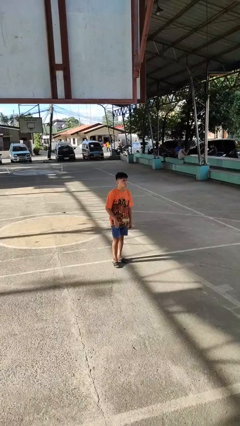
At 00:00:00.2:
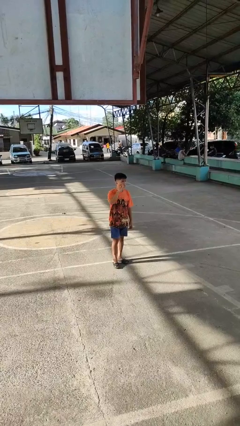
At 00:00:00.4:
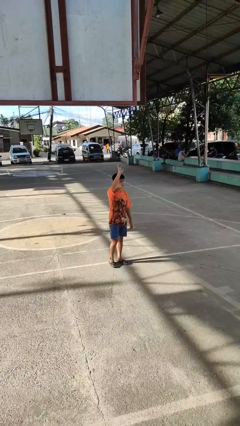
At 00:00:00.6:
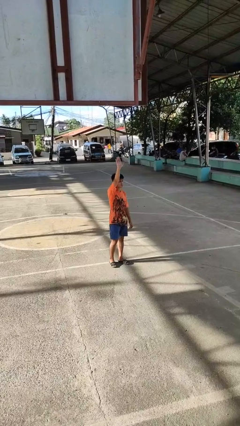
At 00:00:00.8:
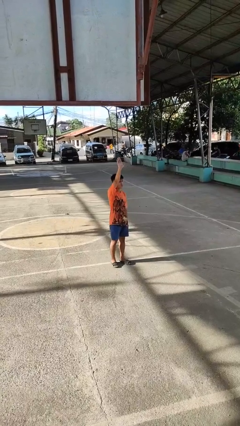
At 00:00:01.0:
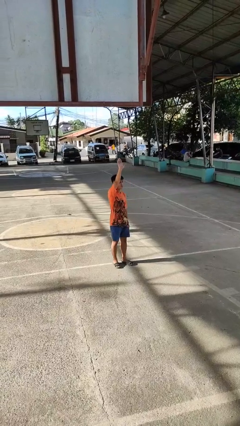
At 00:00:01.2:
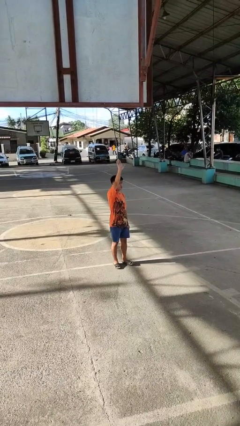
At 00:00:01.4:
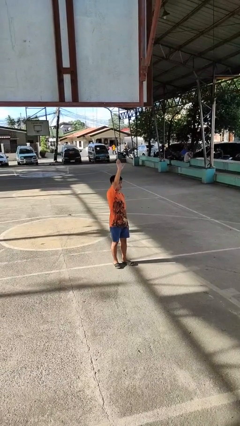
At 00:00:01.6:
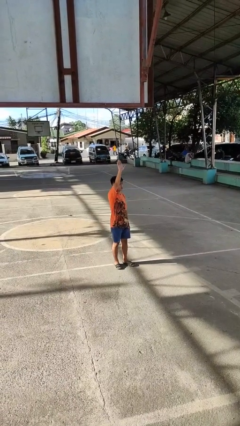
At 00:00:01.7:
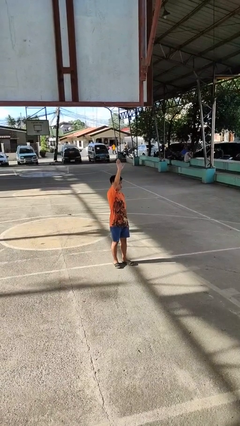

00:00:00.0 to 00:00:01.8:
person gestures raise hand

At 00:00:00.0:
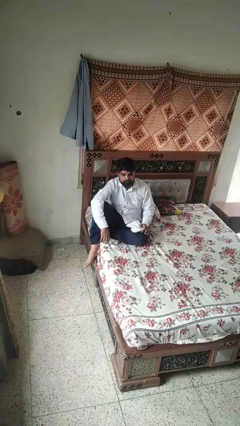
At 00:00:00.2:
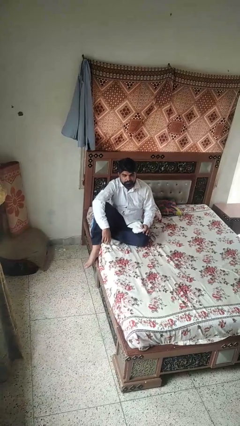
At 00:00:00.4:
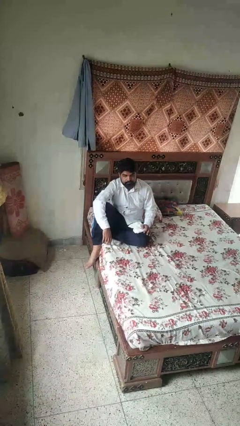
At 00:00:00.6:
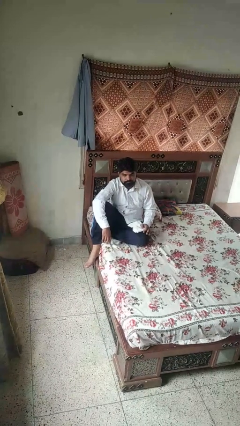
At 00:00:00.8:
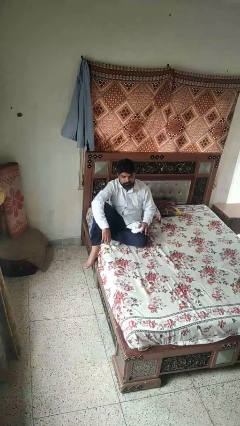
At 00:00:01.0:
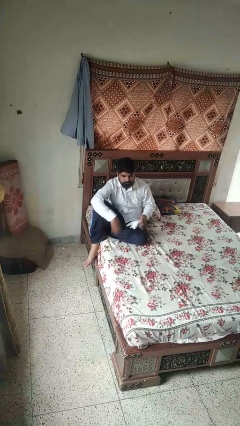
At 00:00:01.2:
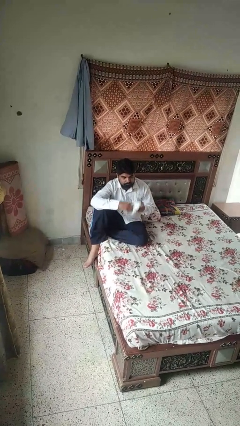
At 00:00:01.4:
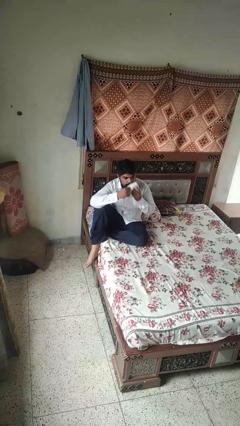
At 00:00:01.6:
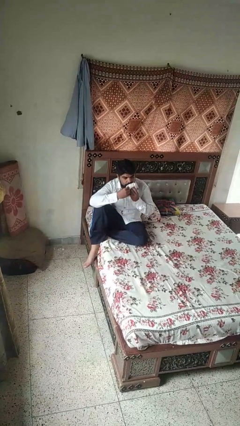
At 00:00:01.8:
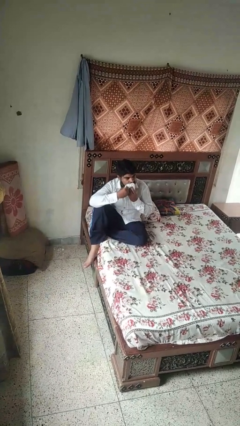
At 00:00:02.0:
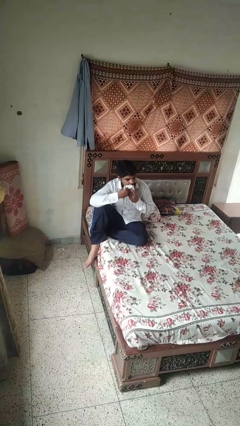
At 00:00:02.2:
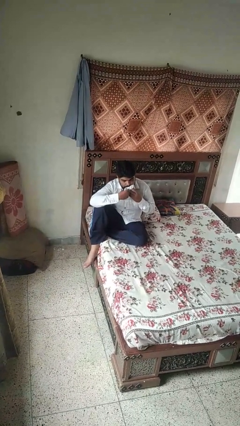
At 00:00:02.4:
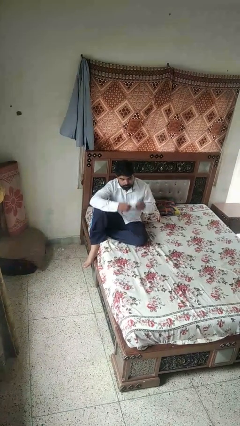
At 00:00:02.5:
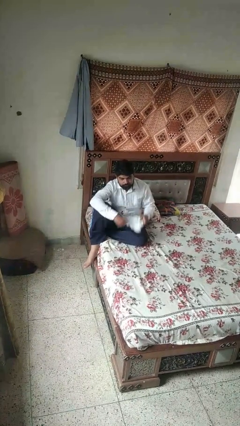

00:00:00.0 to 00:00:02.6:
person wipes mouth with napkin

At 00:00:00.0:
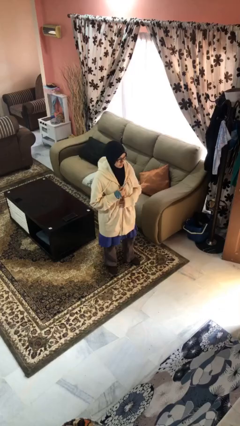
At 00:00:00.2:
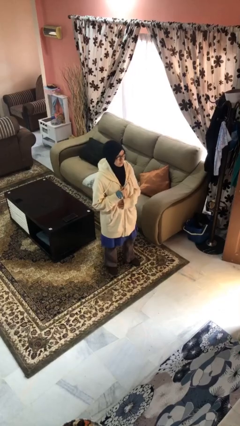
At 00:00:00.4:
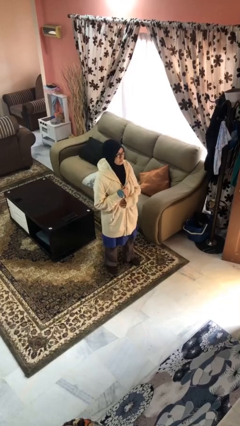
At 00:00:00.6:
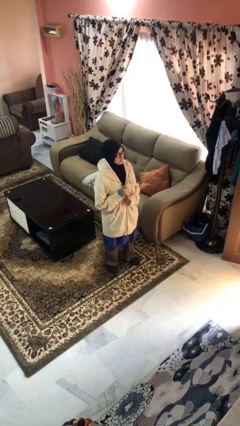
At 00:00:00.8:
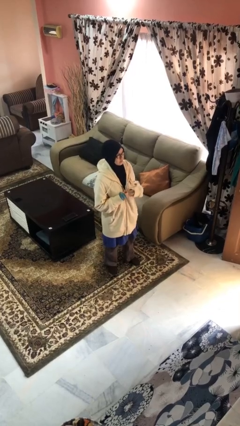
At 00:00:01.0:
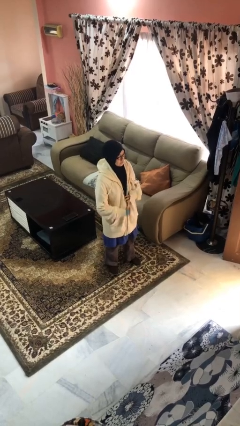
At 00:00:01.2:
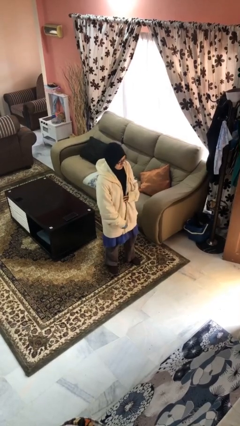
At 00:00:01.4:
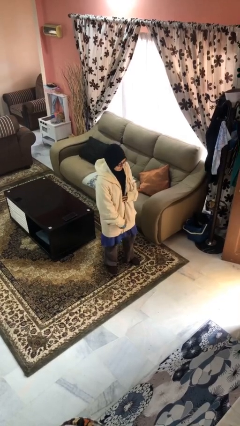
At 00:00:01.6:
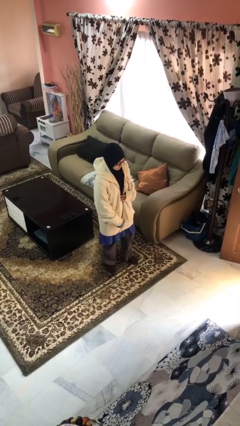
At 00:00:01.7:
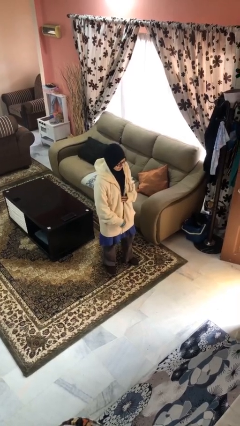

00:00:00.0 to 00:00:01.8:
person unzips jacket

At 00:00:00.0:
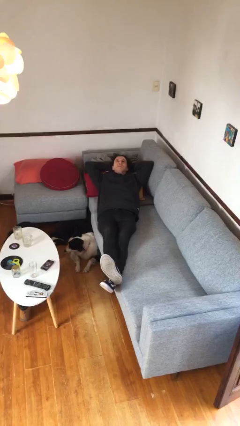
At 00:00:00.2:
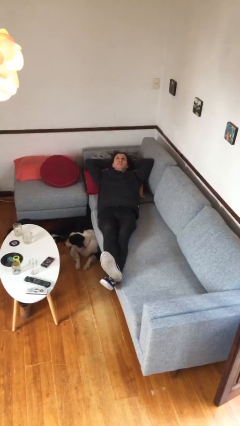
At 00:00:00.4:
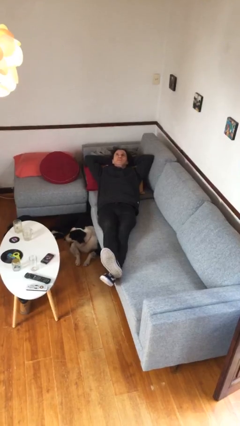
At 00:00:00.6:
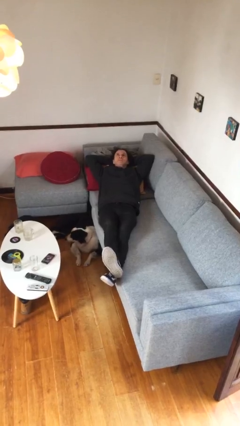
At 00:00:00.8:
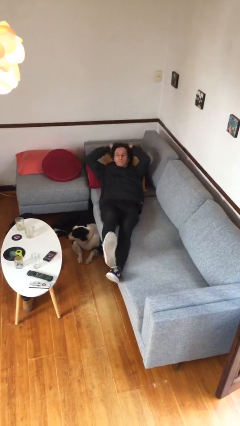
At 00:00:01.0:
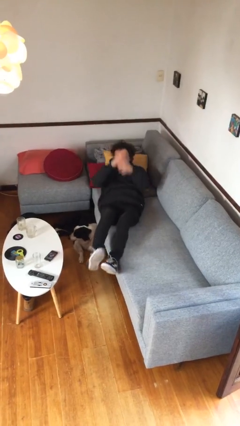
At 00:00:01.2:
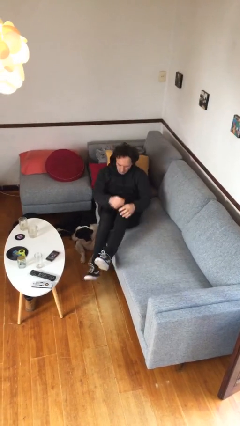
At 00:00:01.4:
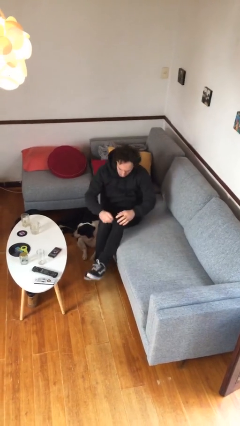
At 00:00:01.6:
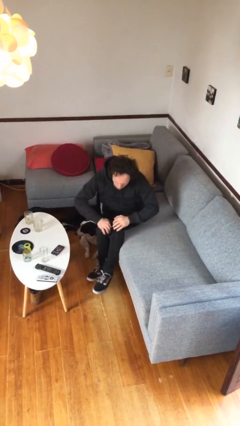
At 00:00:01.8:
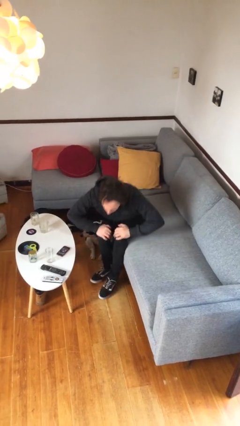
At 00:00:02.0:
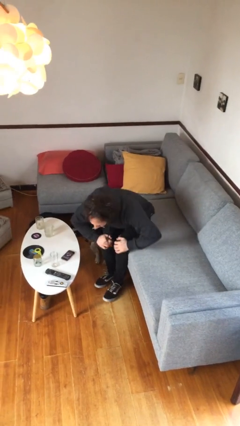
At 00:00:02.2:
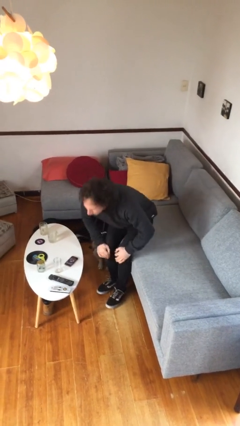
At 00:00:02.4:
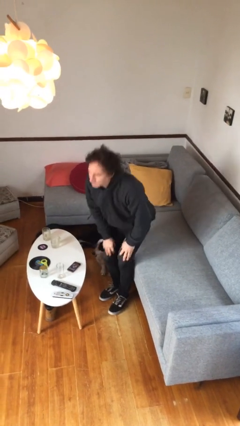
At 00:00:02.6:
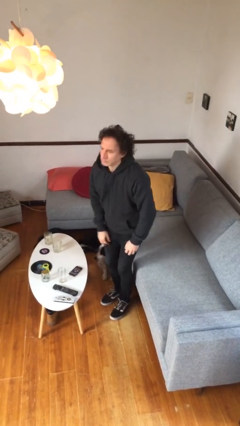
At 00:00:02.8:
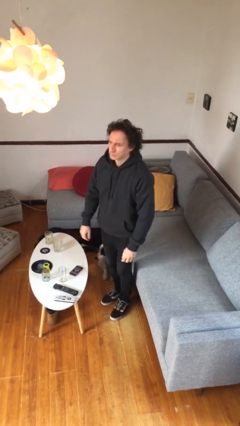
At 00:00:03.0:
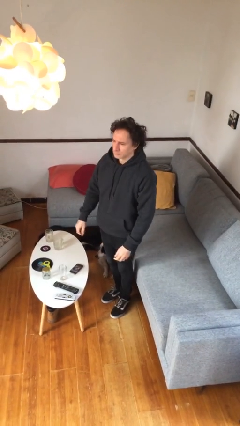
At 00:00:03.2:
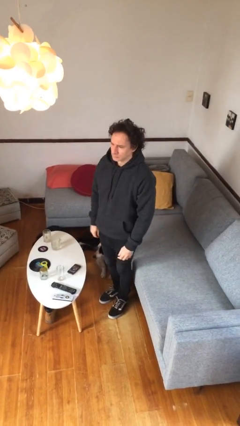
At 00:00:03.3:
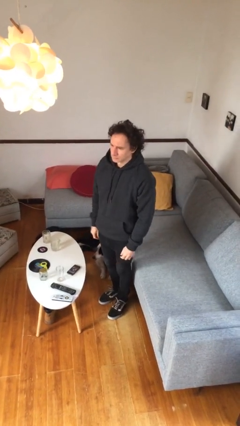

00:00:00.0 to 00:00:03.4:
person stands up

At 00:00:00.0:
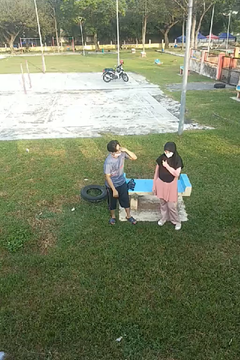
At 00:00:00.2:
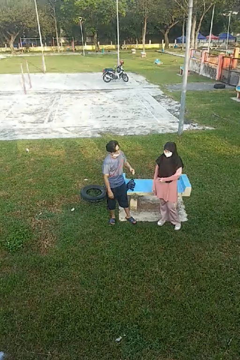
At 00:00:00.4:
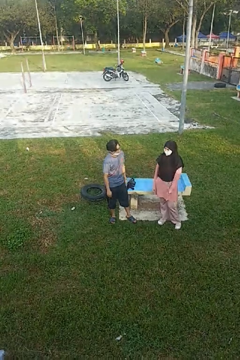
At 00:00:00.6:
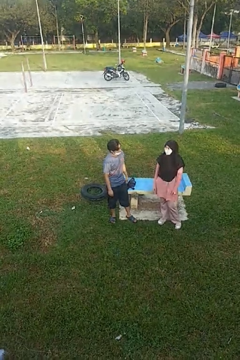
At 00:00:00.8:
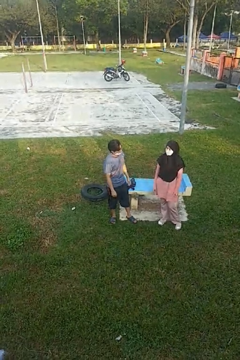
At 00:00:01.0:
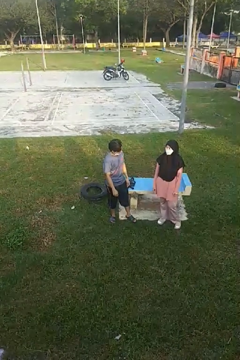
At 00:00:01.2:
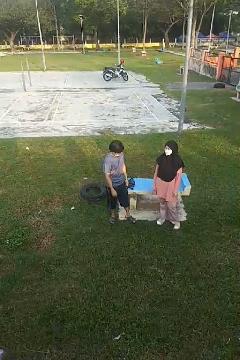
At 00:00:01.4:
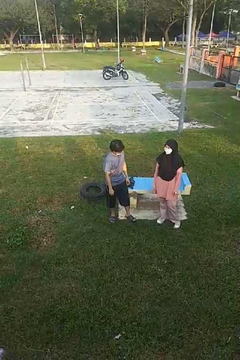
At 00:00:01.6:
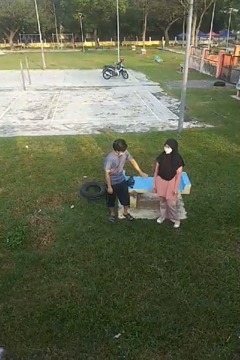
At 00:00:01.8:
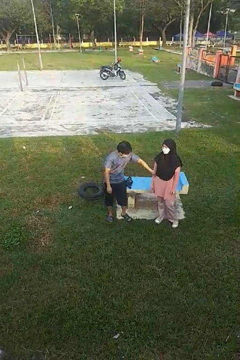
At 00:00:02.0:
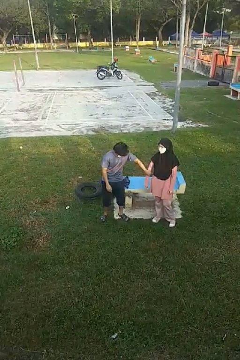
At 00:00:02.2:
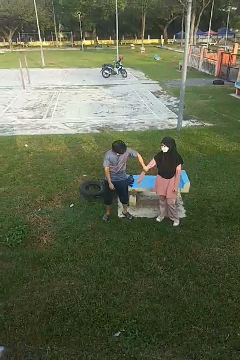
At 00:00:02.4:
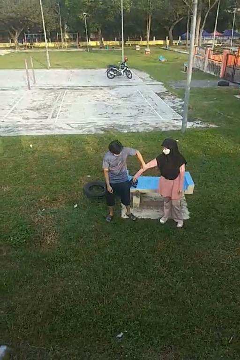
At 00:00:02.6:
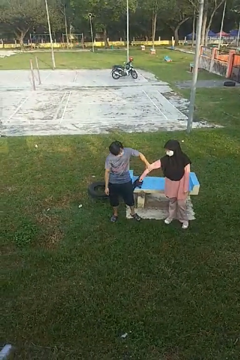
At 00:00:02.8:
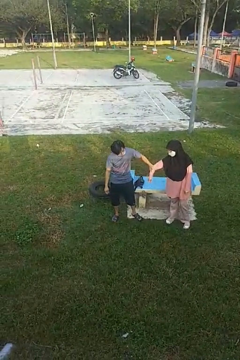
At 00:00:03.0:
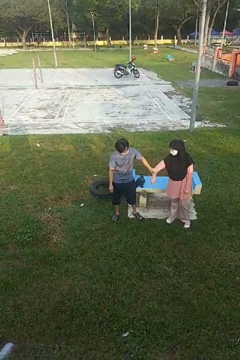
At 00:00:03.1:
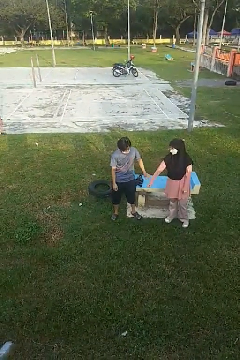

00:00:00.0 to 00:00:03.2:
person grabs person by forearm

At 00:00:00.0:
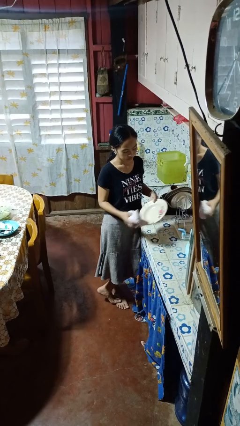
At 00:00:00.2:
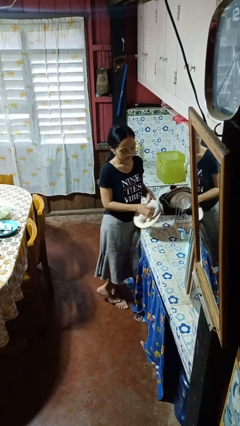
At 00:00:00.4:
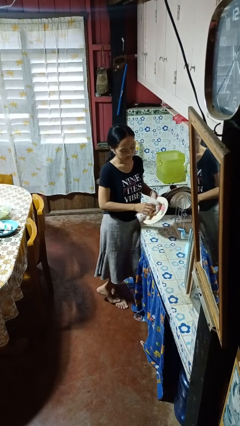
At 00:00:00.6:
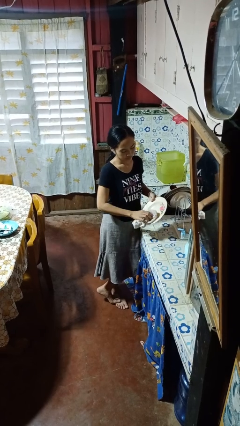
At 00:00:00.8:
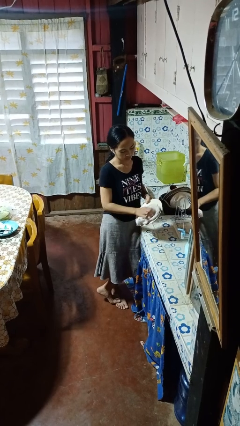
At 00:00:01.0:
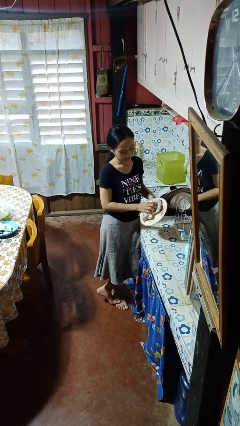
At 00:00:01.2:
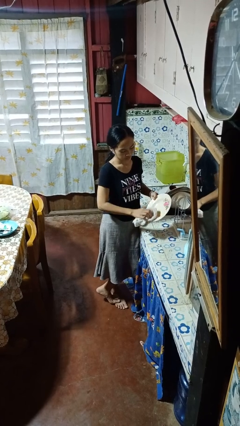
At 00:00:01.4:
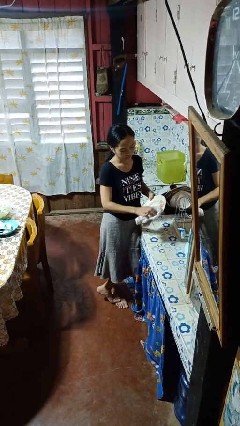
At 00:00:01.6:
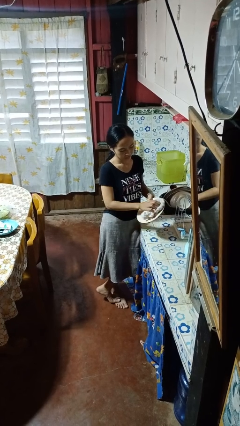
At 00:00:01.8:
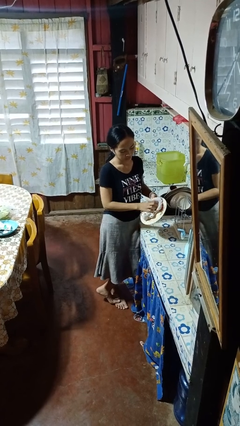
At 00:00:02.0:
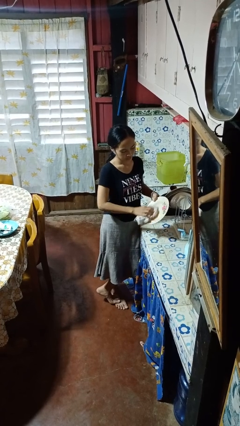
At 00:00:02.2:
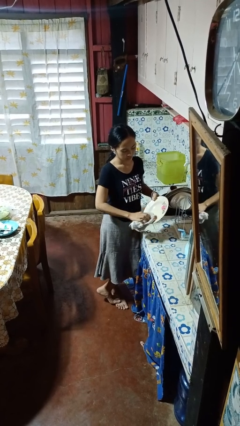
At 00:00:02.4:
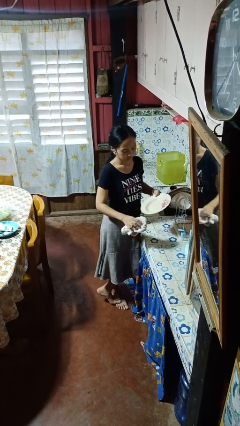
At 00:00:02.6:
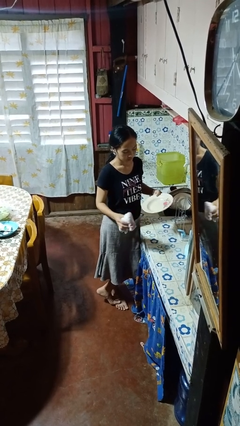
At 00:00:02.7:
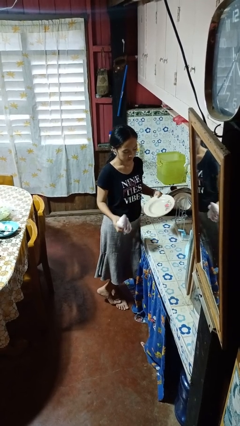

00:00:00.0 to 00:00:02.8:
person dries dish

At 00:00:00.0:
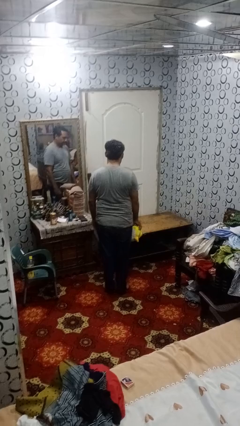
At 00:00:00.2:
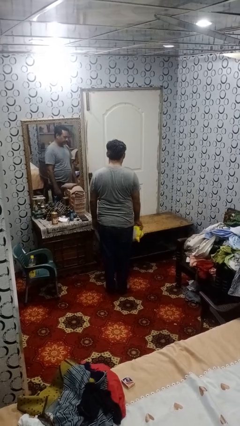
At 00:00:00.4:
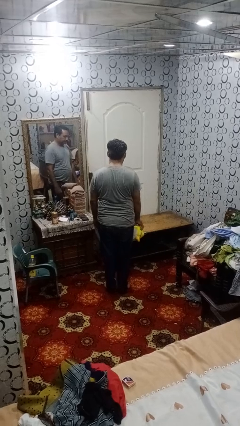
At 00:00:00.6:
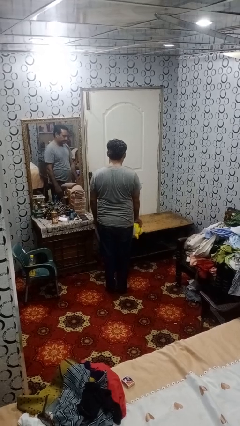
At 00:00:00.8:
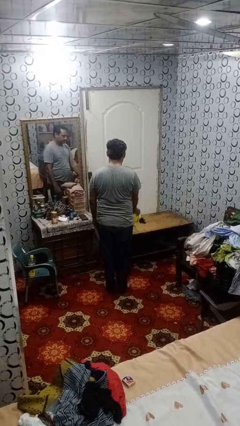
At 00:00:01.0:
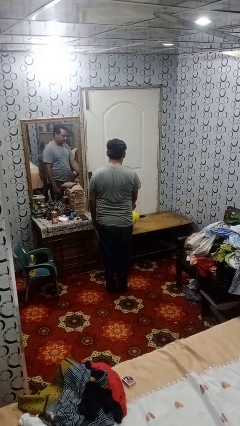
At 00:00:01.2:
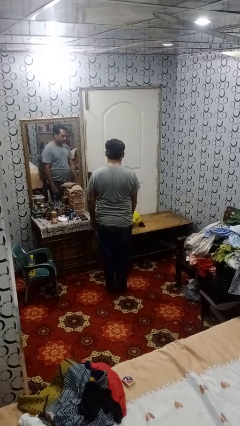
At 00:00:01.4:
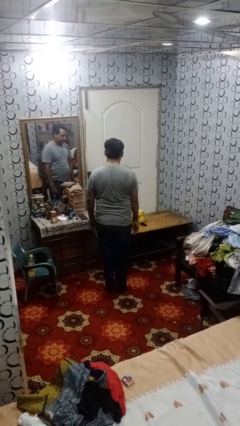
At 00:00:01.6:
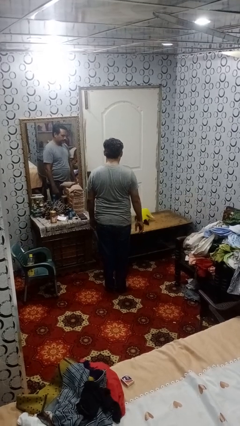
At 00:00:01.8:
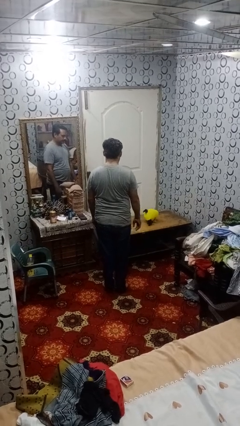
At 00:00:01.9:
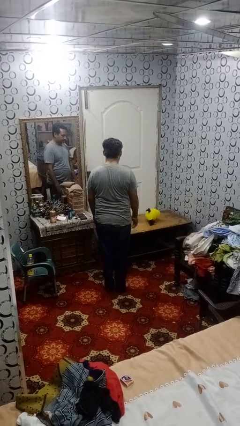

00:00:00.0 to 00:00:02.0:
person throws object on table
